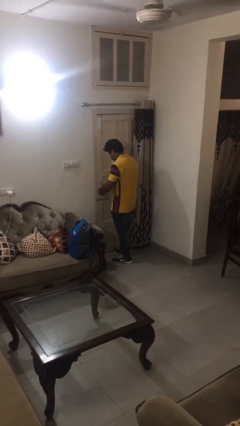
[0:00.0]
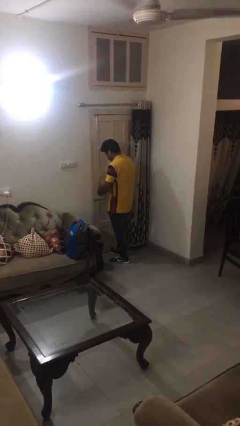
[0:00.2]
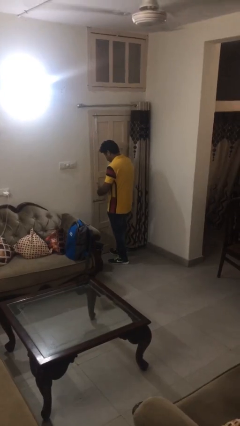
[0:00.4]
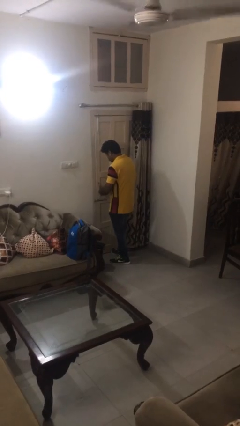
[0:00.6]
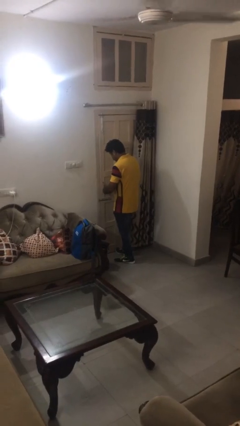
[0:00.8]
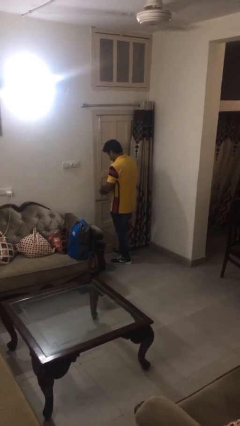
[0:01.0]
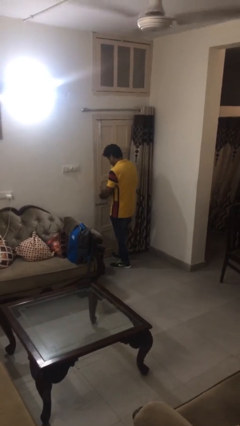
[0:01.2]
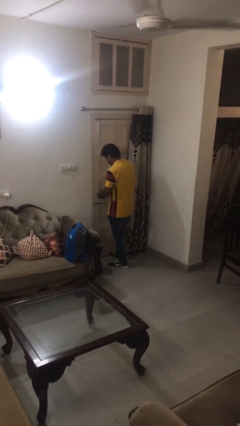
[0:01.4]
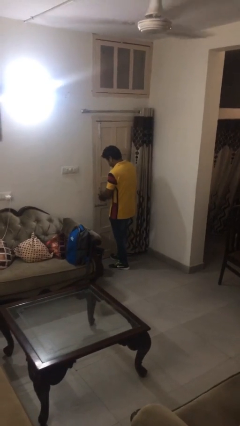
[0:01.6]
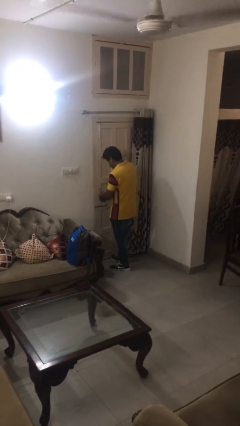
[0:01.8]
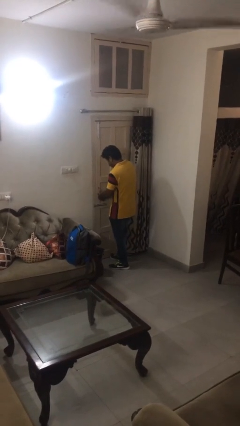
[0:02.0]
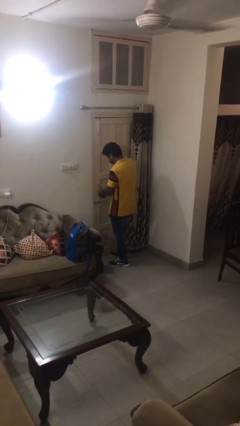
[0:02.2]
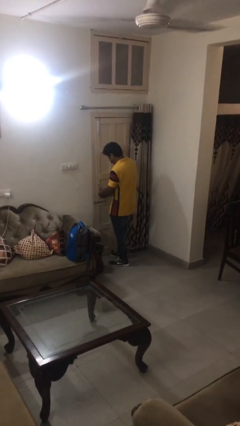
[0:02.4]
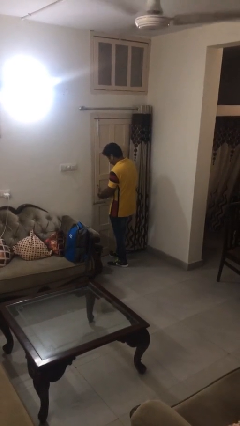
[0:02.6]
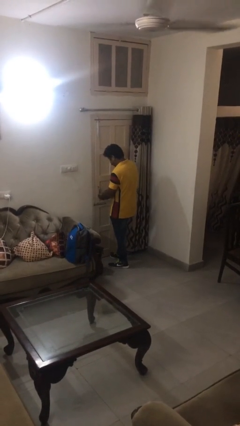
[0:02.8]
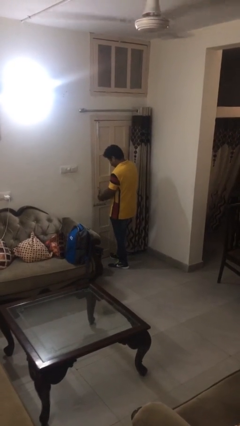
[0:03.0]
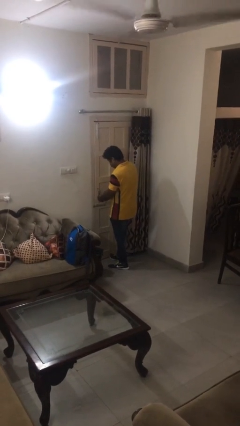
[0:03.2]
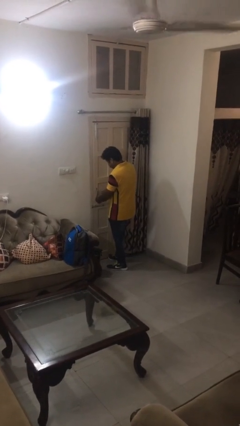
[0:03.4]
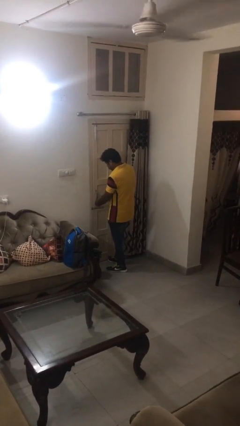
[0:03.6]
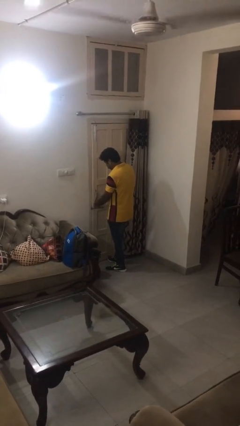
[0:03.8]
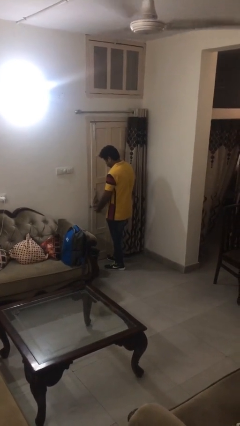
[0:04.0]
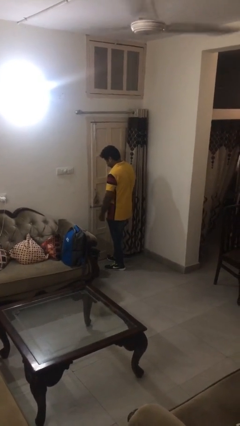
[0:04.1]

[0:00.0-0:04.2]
person locks door with keys

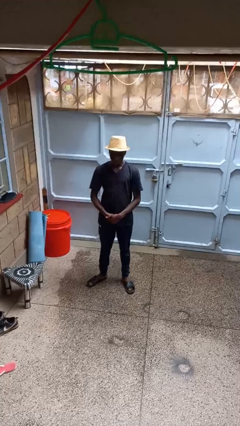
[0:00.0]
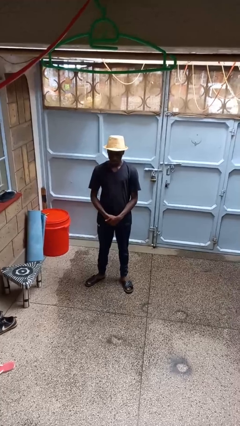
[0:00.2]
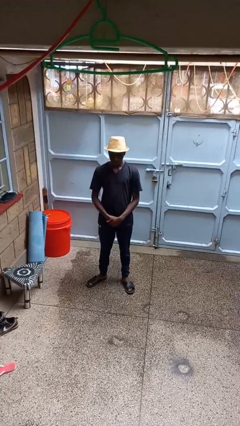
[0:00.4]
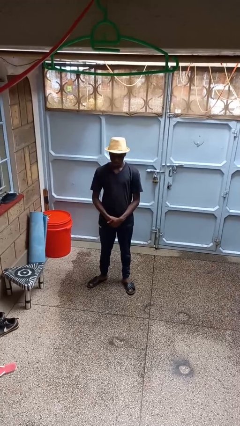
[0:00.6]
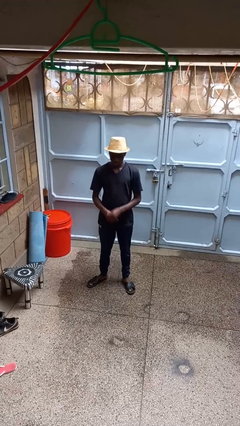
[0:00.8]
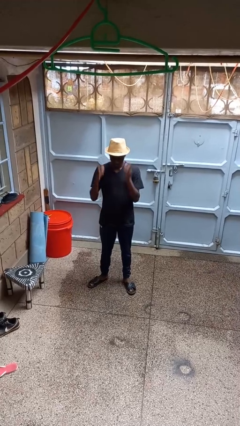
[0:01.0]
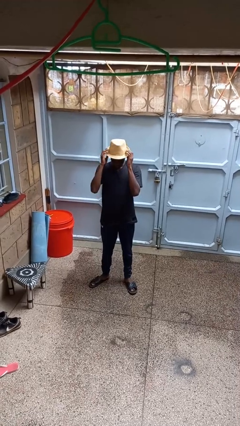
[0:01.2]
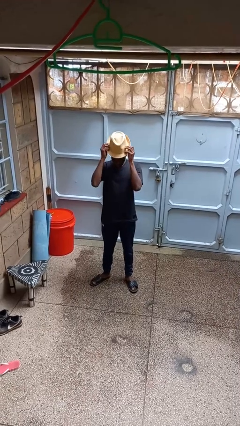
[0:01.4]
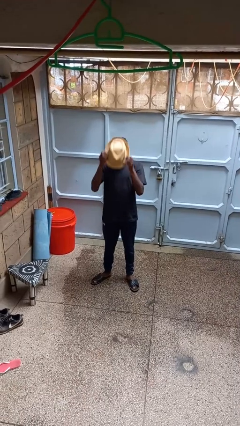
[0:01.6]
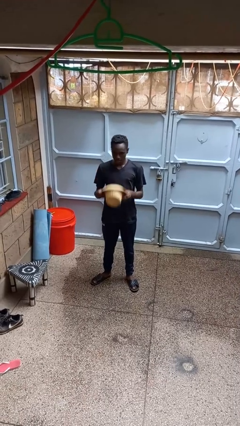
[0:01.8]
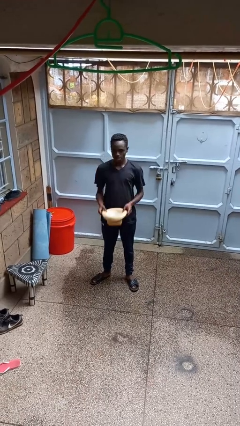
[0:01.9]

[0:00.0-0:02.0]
person takes off hat

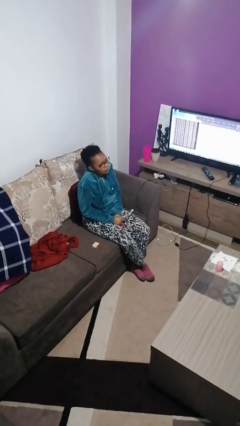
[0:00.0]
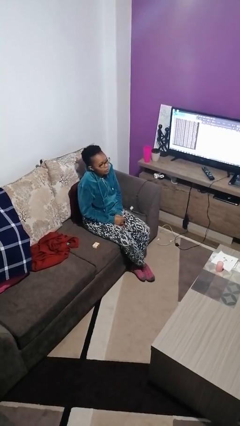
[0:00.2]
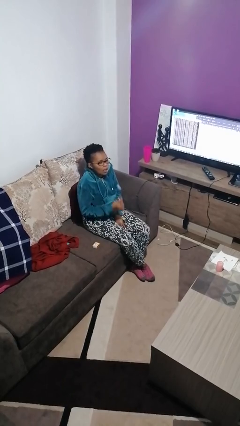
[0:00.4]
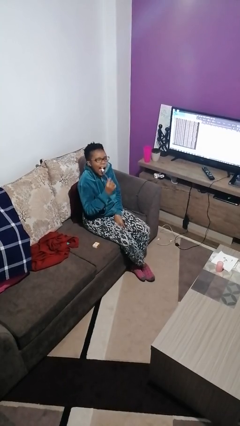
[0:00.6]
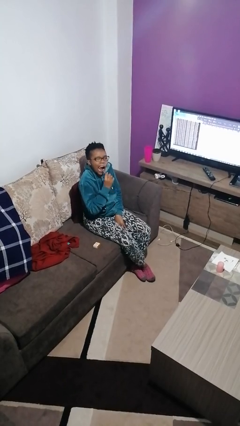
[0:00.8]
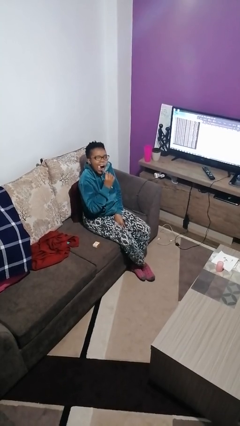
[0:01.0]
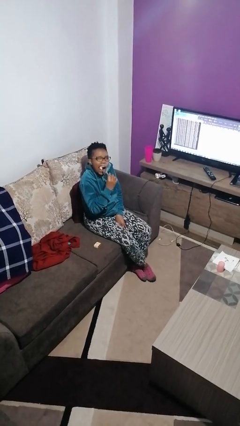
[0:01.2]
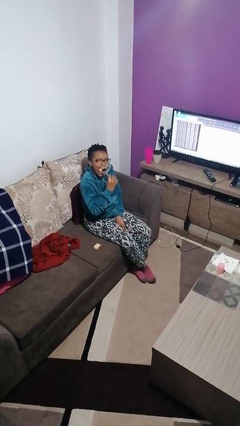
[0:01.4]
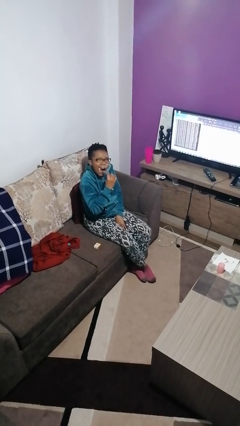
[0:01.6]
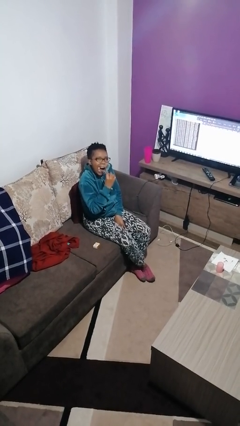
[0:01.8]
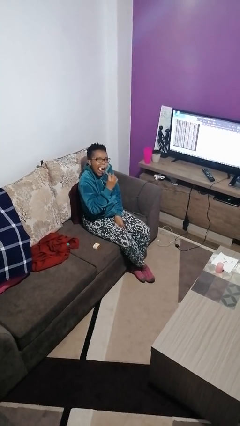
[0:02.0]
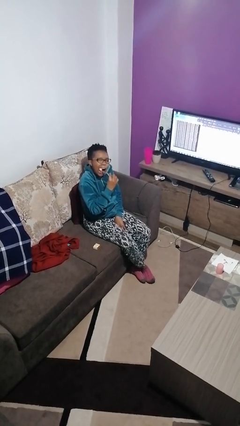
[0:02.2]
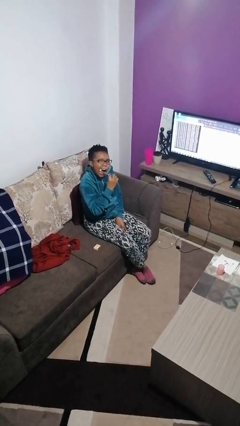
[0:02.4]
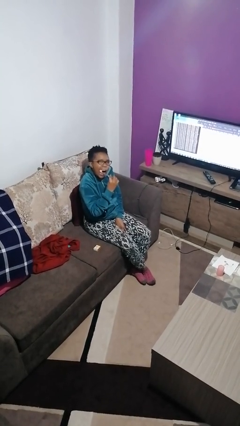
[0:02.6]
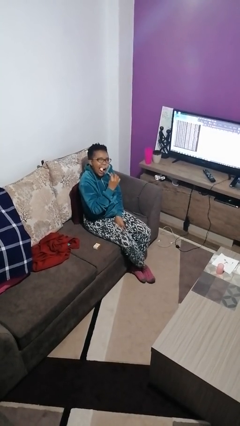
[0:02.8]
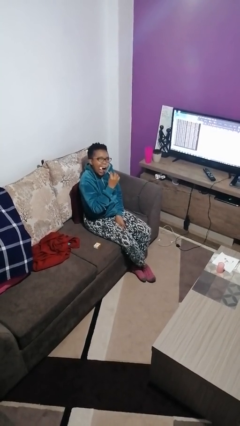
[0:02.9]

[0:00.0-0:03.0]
person brushes teeth

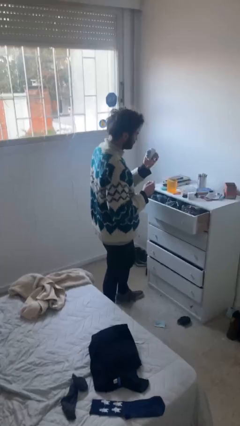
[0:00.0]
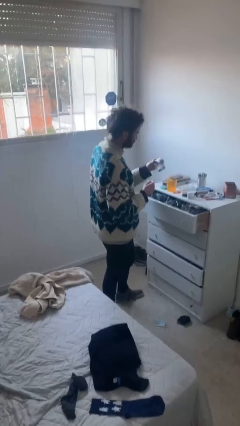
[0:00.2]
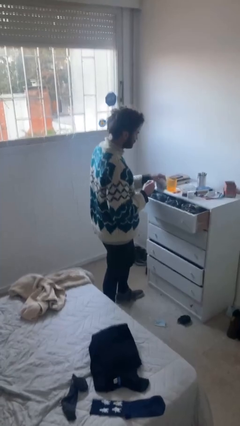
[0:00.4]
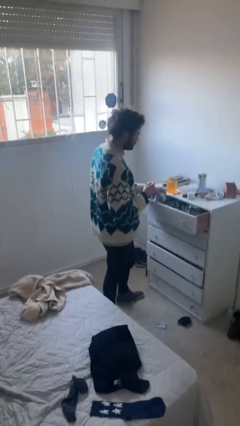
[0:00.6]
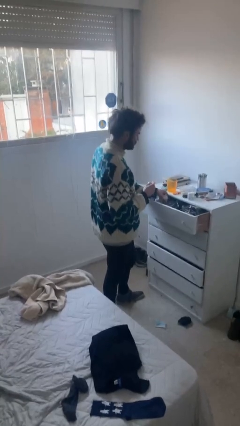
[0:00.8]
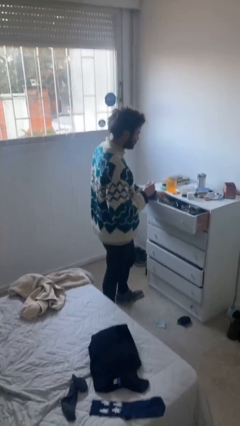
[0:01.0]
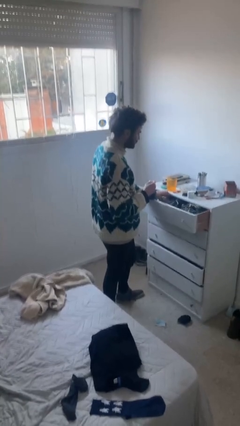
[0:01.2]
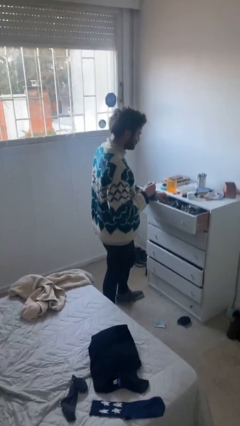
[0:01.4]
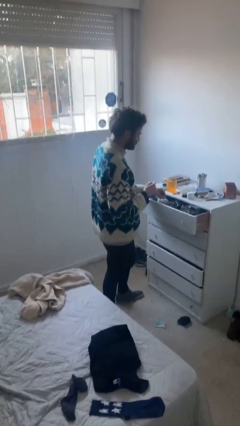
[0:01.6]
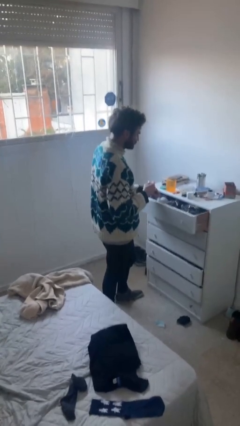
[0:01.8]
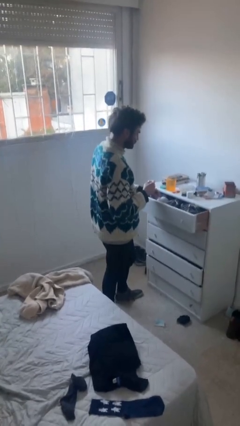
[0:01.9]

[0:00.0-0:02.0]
person puts clothes into dresser

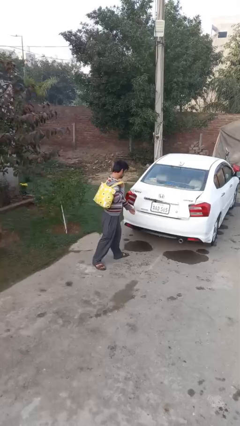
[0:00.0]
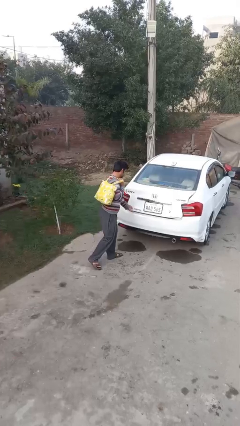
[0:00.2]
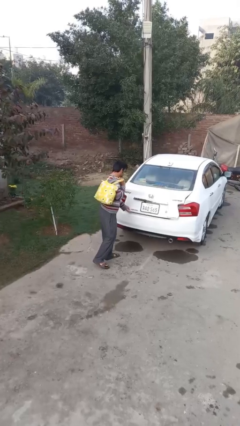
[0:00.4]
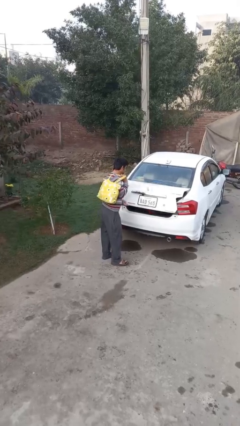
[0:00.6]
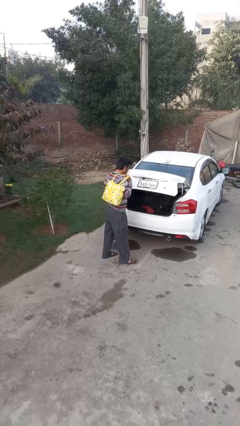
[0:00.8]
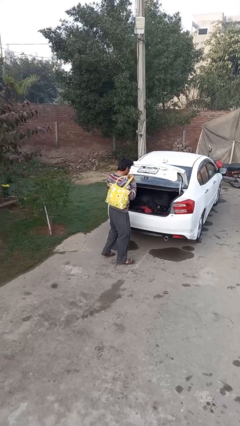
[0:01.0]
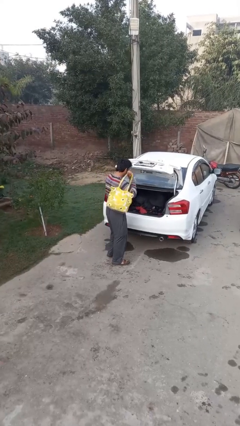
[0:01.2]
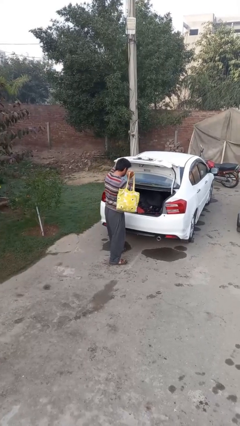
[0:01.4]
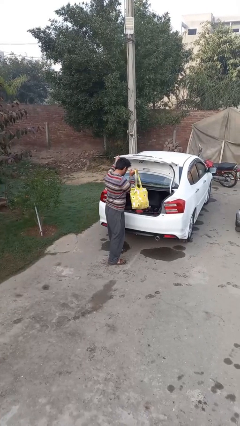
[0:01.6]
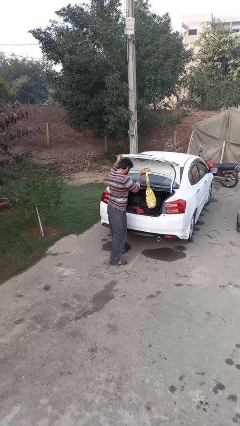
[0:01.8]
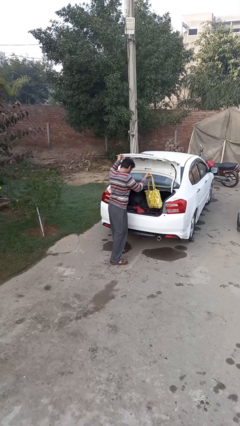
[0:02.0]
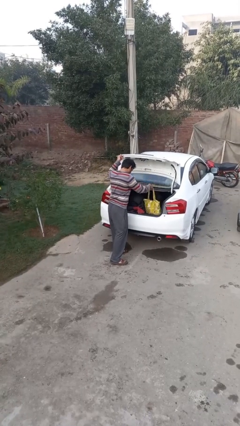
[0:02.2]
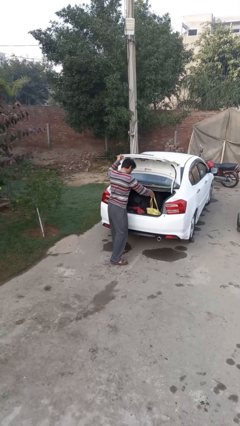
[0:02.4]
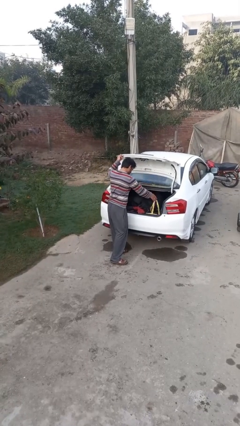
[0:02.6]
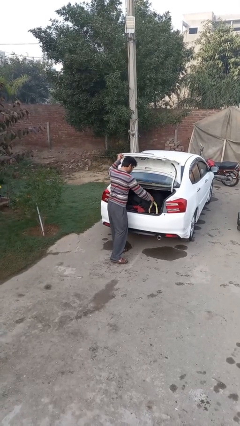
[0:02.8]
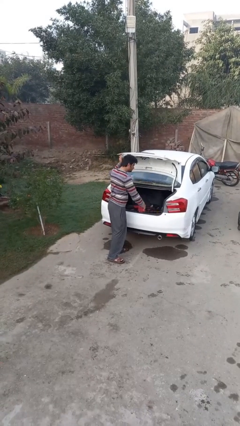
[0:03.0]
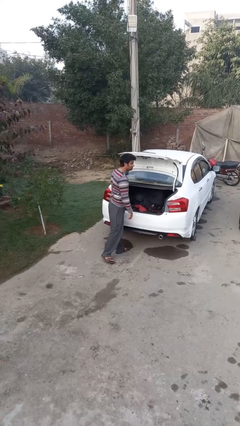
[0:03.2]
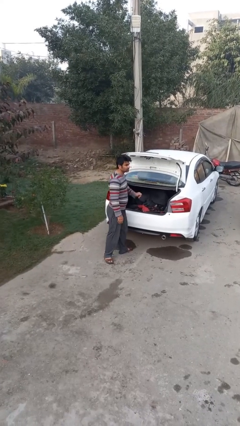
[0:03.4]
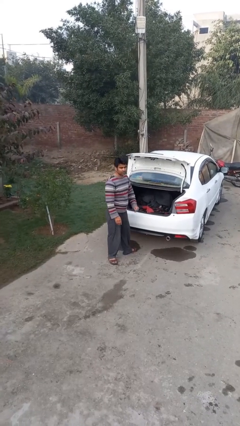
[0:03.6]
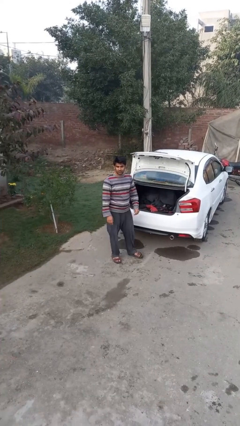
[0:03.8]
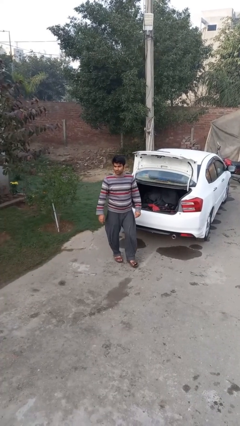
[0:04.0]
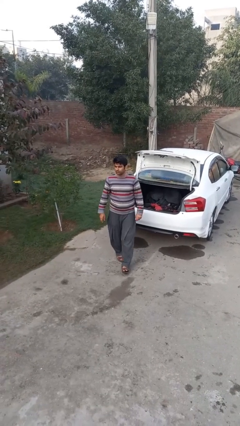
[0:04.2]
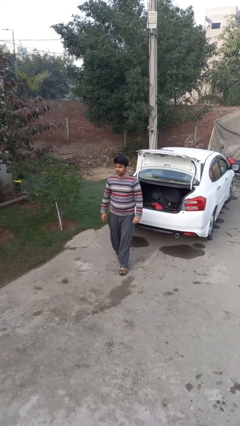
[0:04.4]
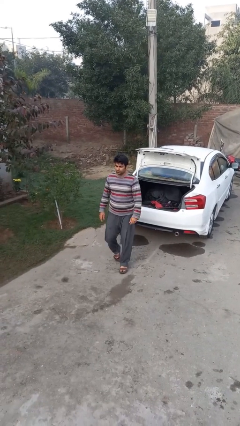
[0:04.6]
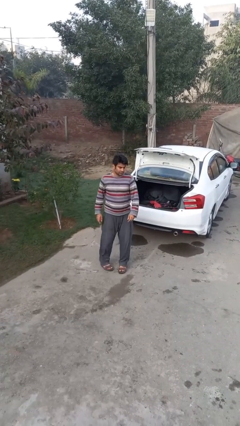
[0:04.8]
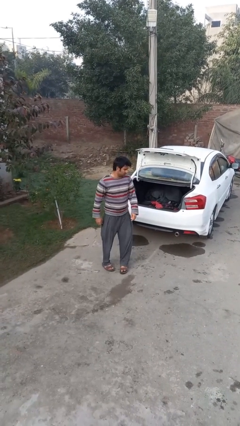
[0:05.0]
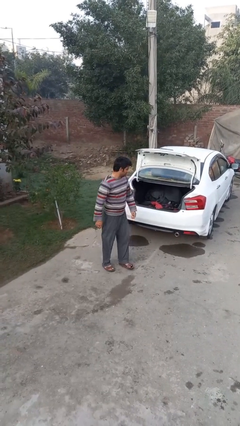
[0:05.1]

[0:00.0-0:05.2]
person loads car

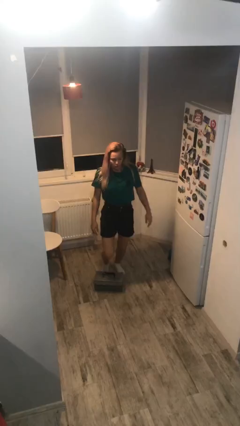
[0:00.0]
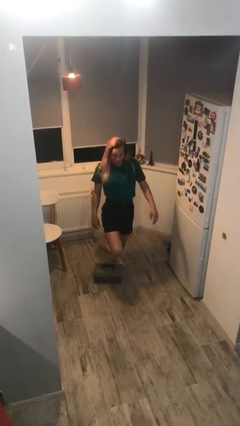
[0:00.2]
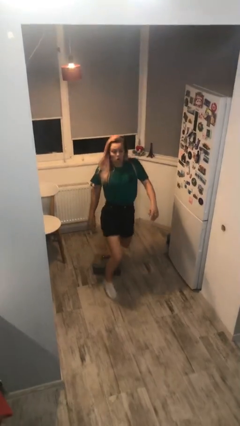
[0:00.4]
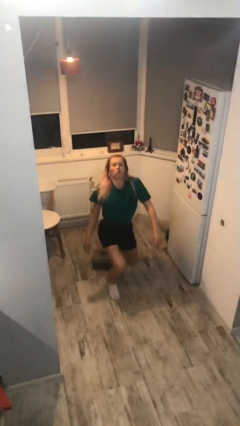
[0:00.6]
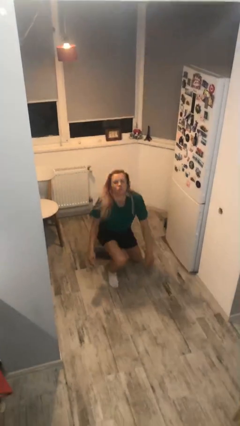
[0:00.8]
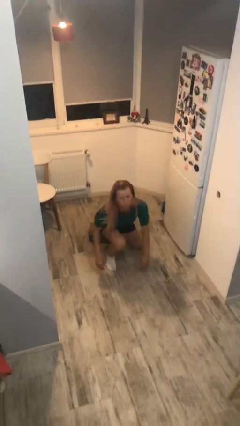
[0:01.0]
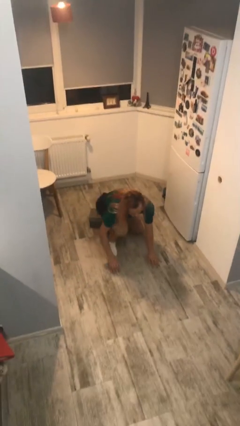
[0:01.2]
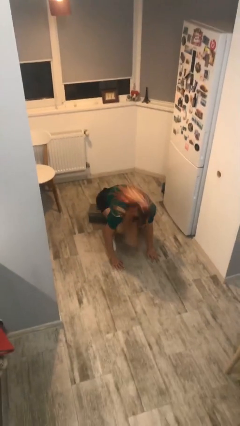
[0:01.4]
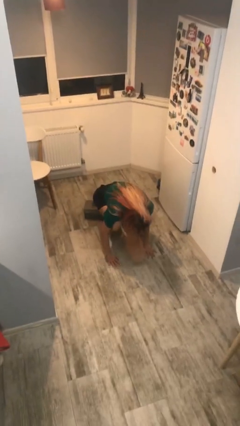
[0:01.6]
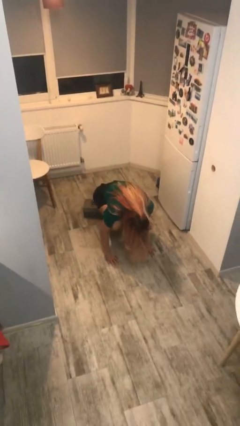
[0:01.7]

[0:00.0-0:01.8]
person trips on object on floor
